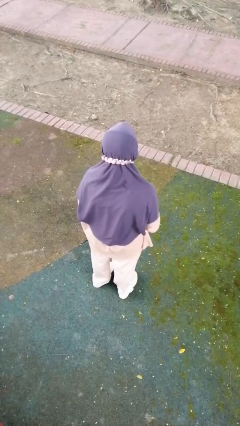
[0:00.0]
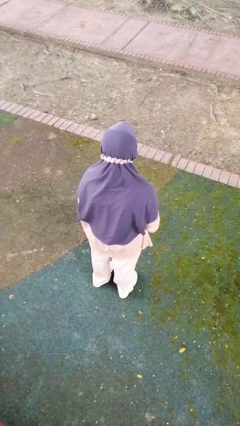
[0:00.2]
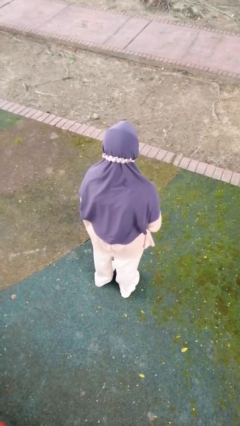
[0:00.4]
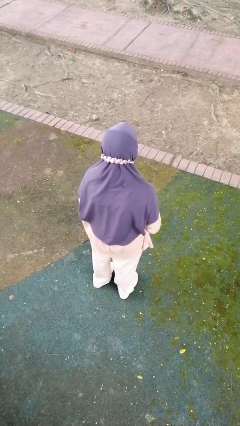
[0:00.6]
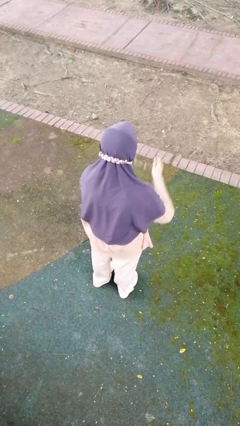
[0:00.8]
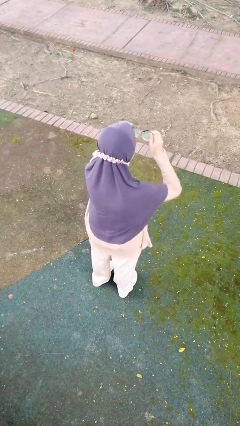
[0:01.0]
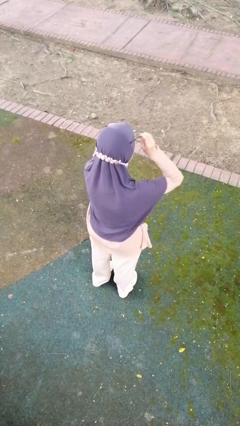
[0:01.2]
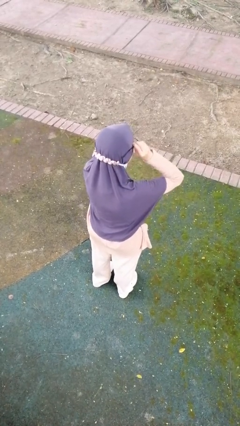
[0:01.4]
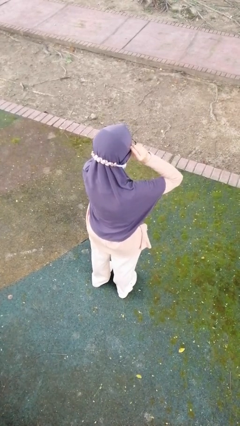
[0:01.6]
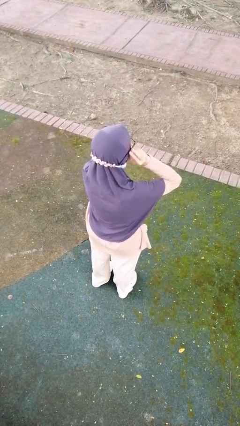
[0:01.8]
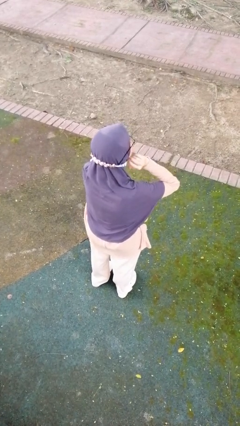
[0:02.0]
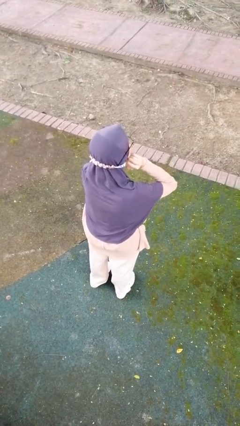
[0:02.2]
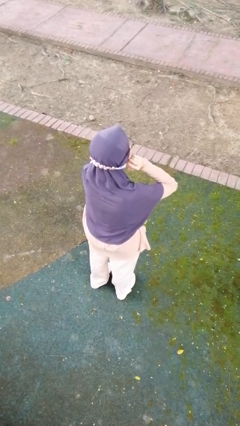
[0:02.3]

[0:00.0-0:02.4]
person puts on glasses

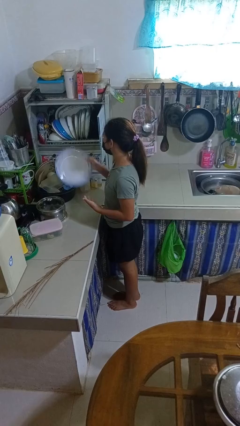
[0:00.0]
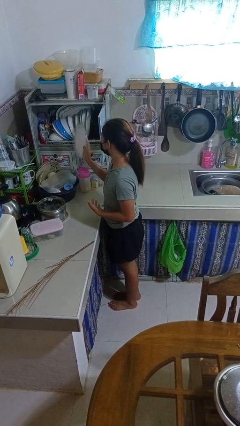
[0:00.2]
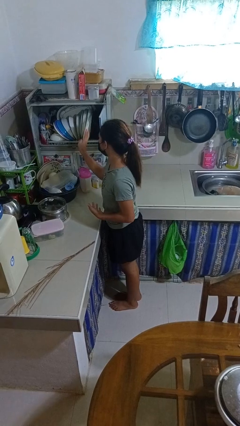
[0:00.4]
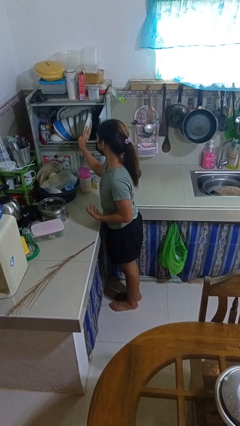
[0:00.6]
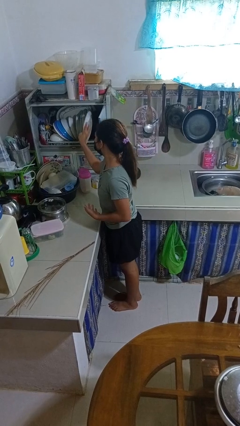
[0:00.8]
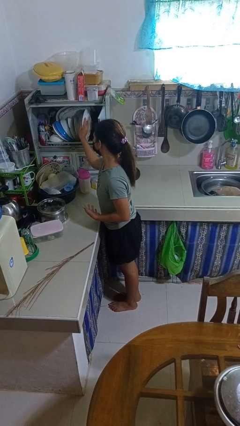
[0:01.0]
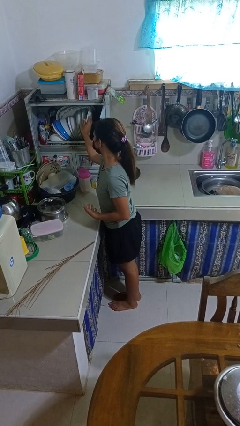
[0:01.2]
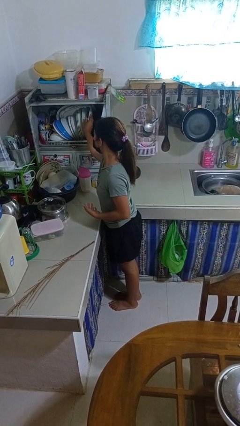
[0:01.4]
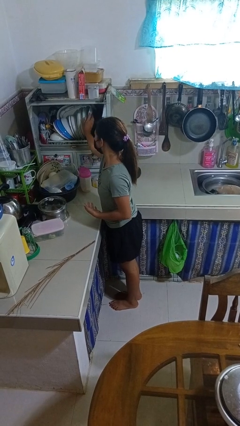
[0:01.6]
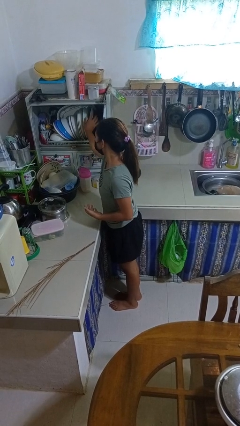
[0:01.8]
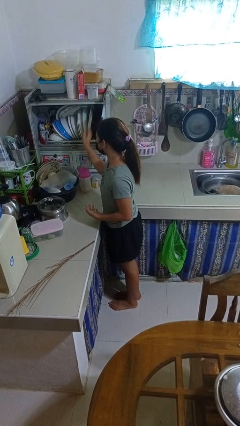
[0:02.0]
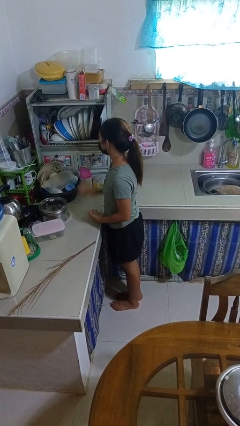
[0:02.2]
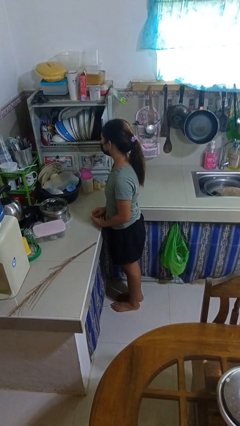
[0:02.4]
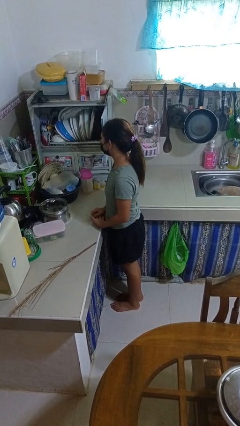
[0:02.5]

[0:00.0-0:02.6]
person puts object into kitchen drawer

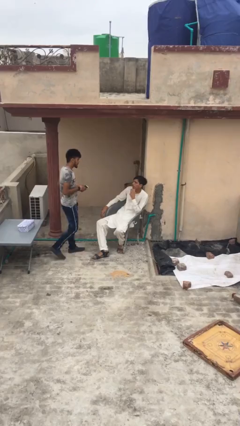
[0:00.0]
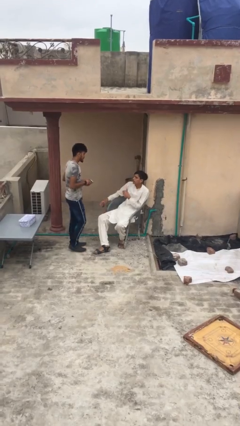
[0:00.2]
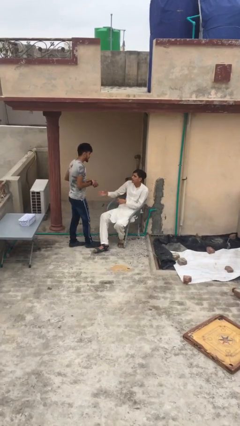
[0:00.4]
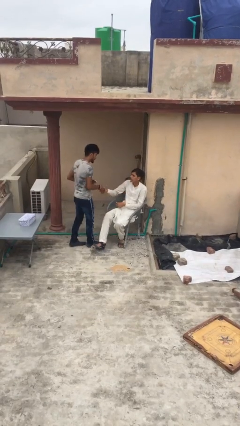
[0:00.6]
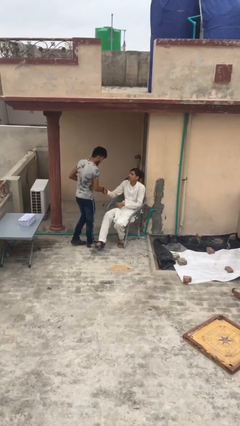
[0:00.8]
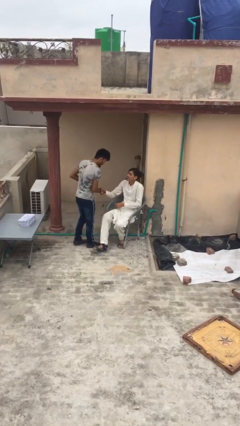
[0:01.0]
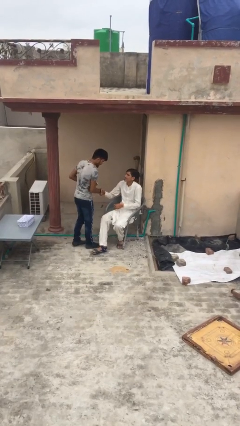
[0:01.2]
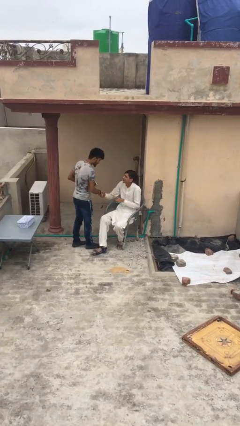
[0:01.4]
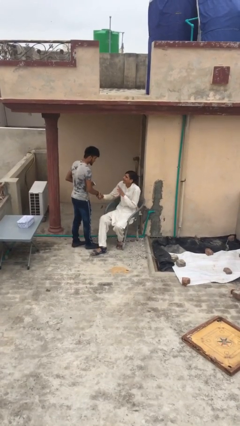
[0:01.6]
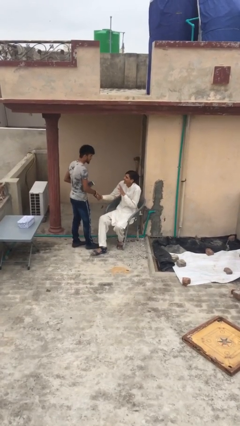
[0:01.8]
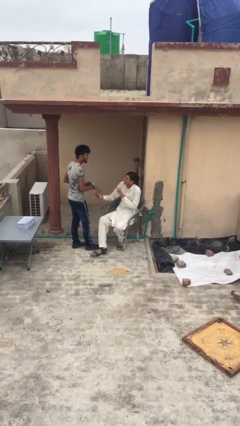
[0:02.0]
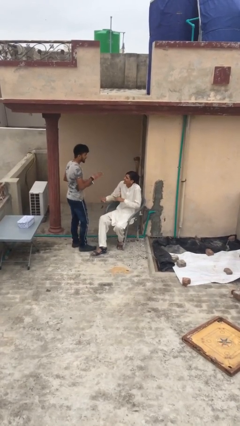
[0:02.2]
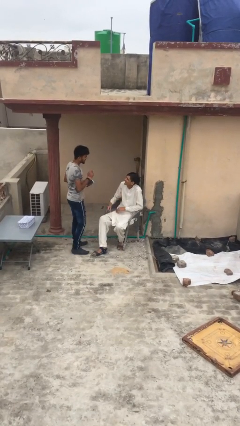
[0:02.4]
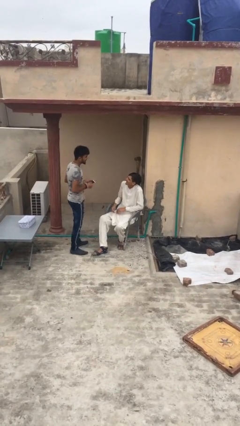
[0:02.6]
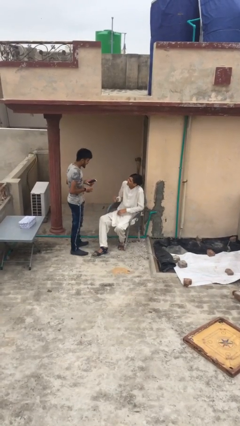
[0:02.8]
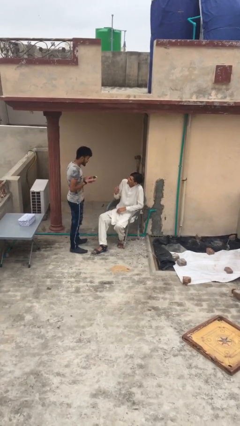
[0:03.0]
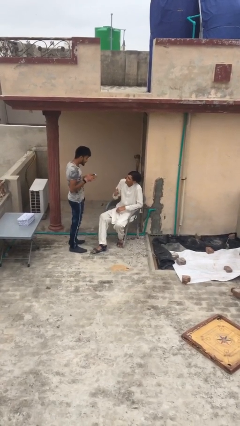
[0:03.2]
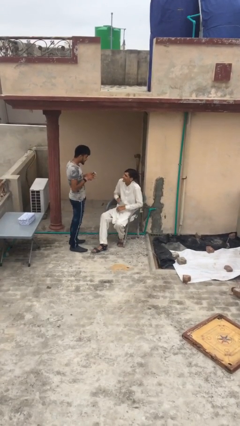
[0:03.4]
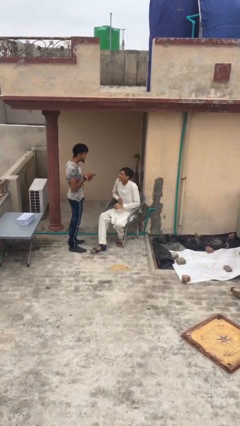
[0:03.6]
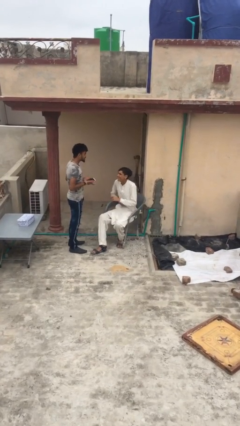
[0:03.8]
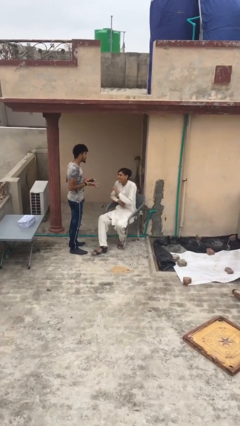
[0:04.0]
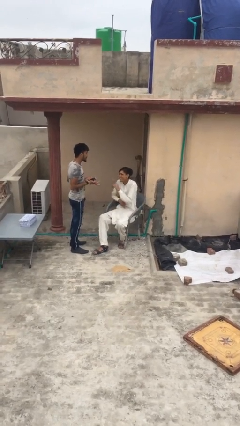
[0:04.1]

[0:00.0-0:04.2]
person shakes hand

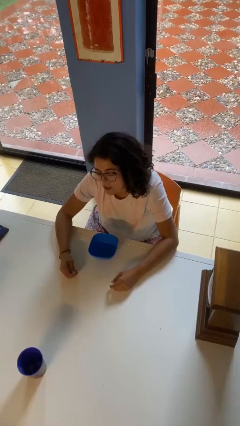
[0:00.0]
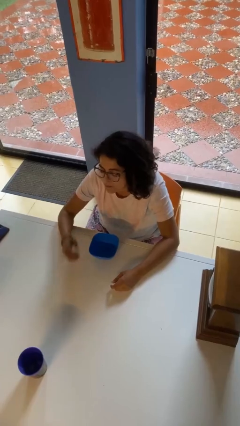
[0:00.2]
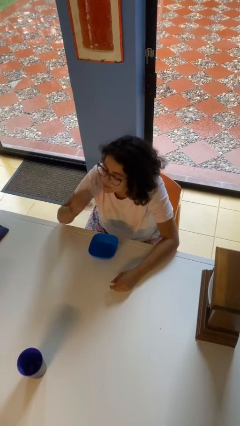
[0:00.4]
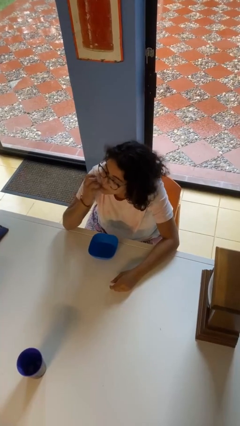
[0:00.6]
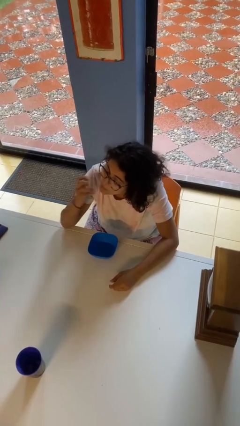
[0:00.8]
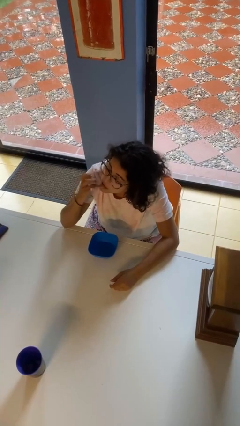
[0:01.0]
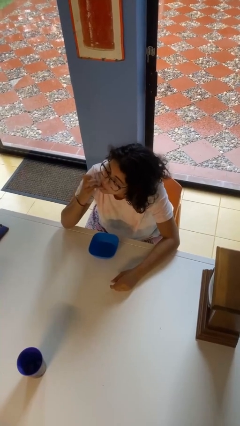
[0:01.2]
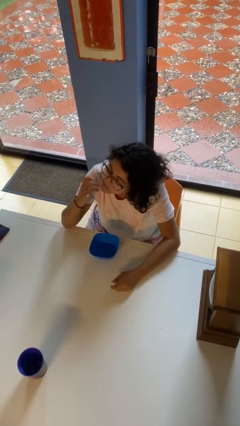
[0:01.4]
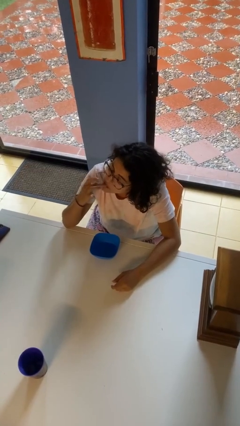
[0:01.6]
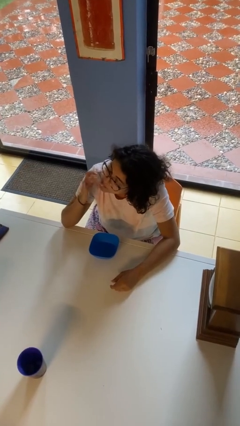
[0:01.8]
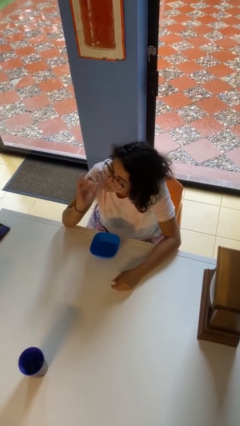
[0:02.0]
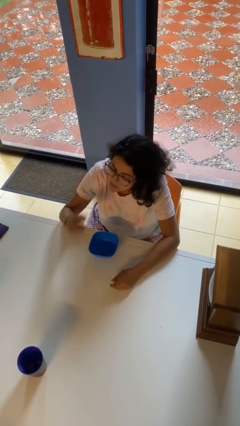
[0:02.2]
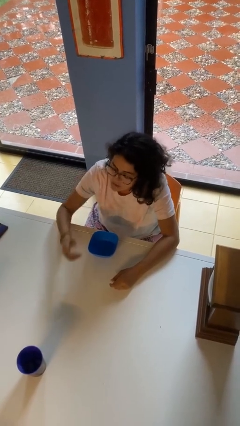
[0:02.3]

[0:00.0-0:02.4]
person licks fingers

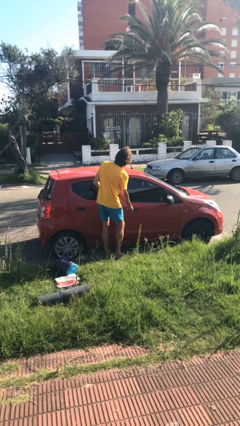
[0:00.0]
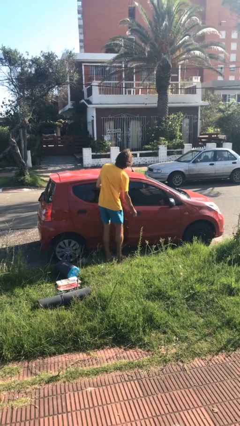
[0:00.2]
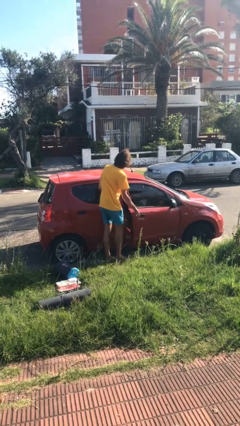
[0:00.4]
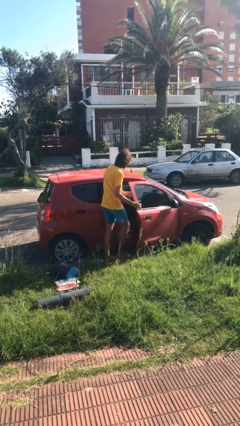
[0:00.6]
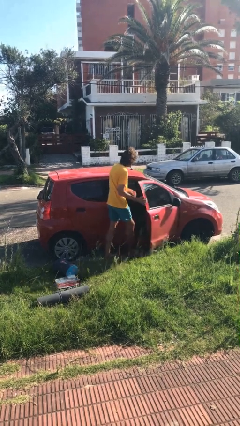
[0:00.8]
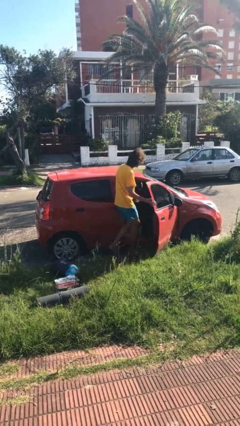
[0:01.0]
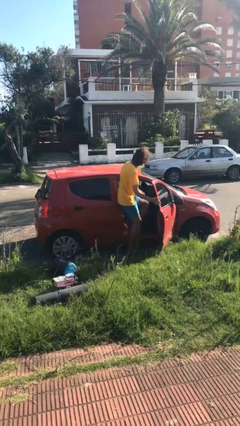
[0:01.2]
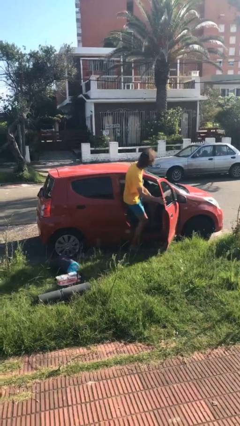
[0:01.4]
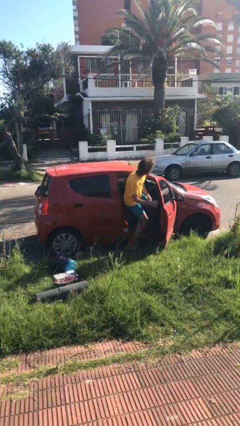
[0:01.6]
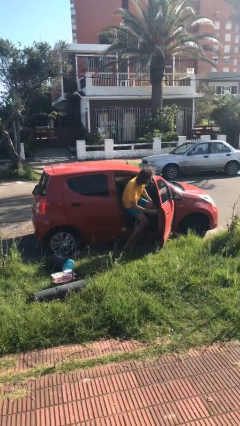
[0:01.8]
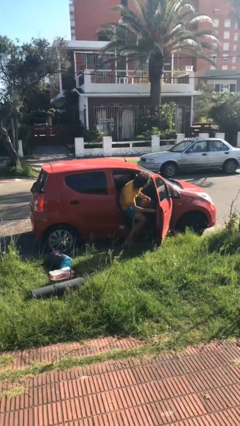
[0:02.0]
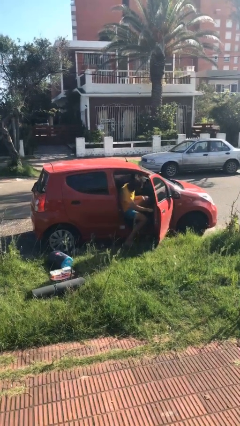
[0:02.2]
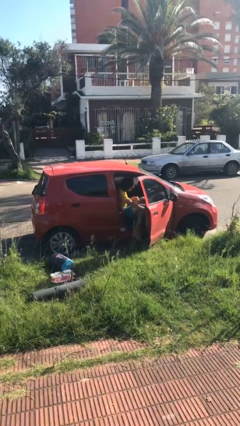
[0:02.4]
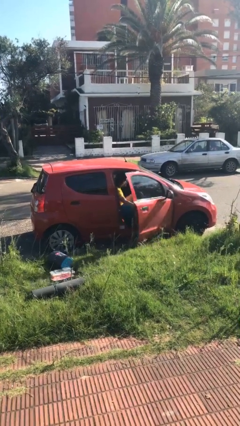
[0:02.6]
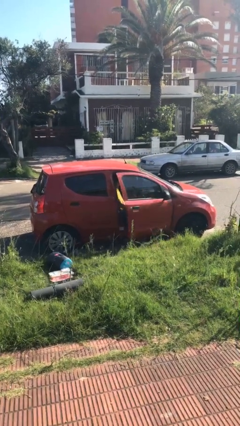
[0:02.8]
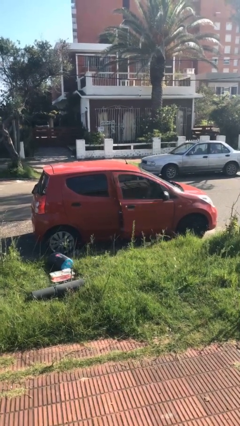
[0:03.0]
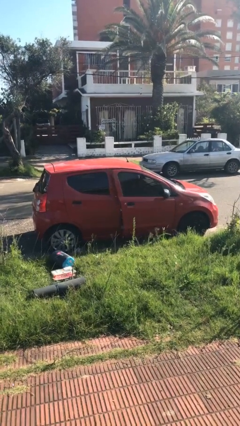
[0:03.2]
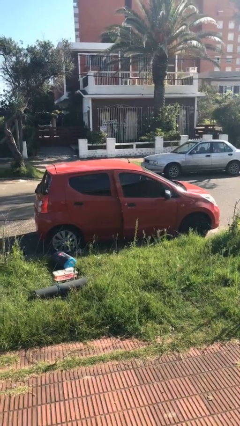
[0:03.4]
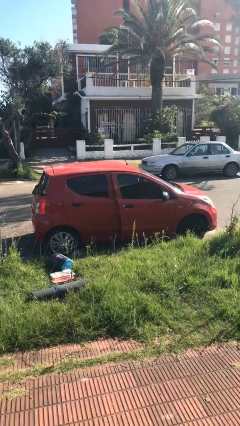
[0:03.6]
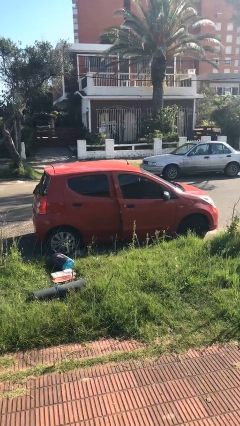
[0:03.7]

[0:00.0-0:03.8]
car picks up person

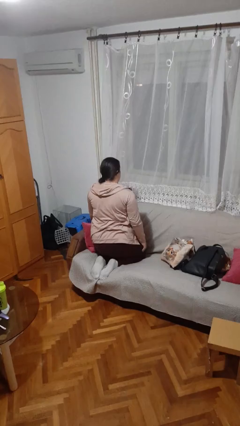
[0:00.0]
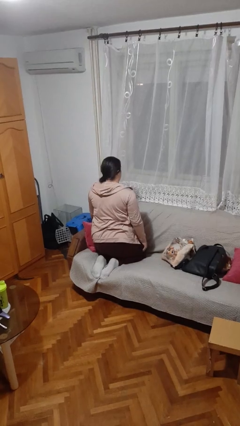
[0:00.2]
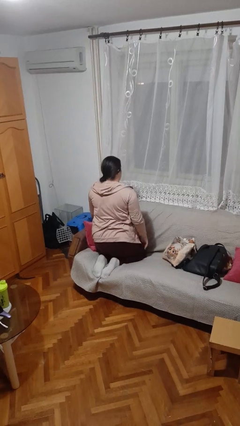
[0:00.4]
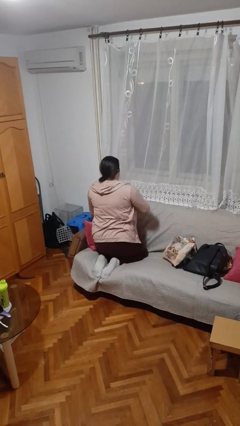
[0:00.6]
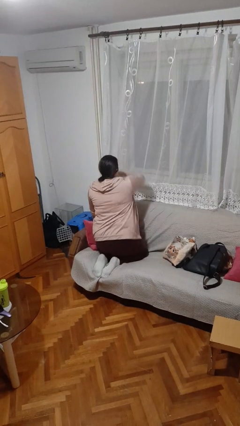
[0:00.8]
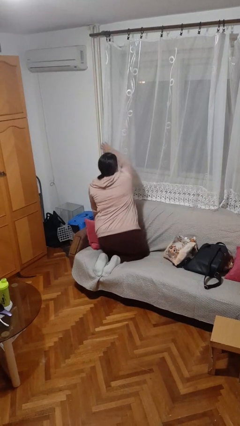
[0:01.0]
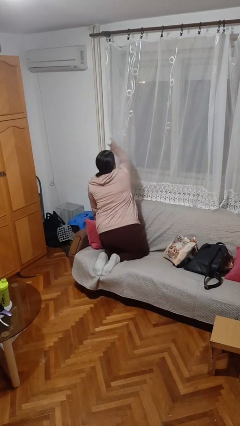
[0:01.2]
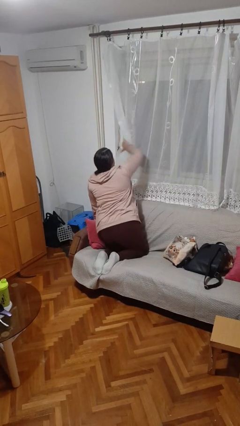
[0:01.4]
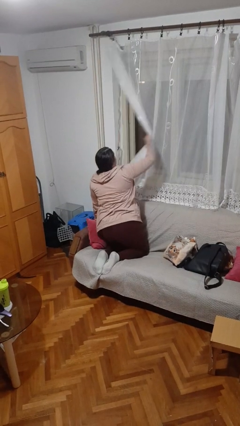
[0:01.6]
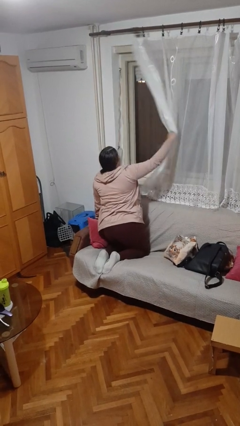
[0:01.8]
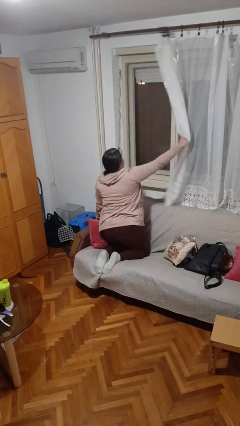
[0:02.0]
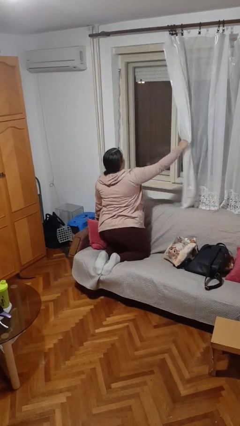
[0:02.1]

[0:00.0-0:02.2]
person opens curtains
